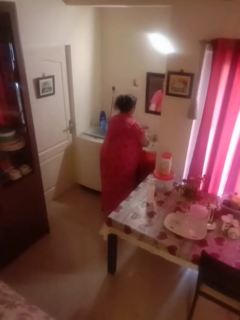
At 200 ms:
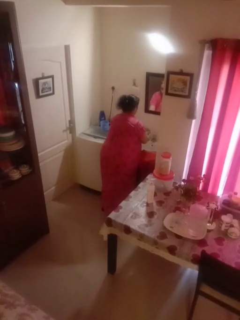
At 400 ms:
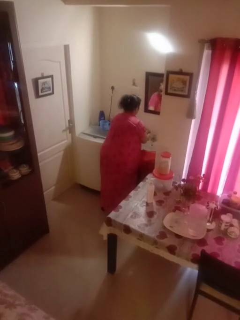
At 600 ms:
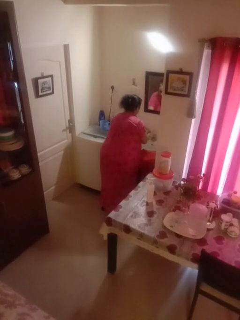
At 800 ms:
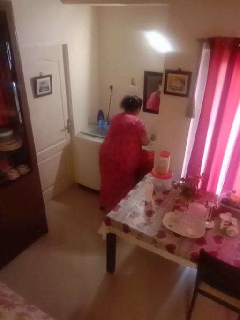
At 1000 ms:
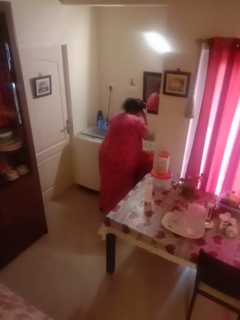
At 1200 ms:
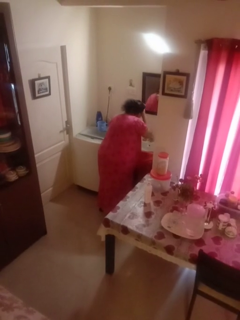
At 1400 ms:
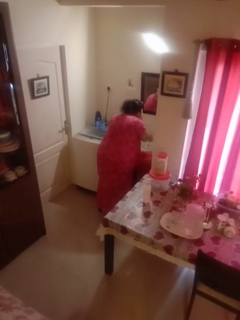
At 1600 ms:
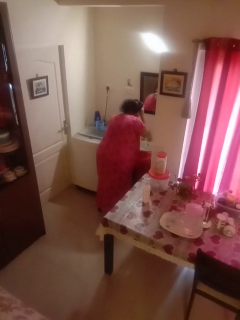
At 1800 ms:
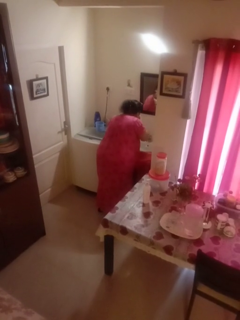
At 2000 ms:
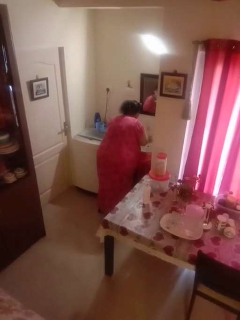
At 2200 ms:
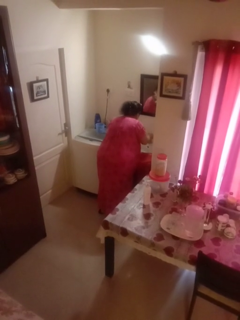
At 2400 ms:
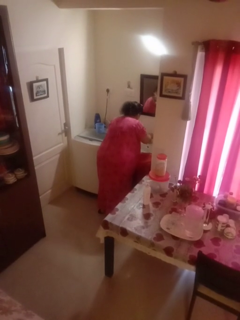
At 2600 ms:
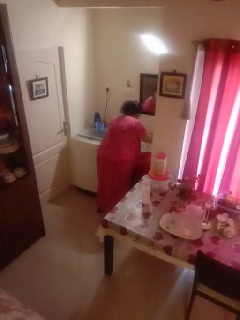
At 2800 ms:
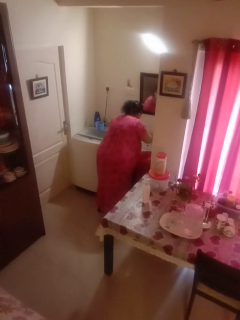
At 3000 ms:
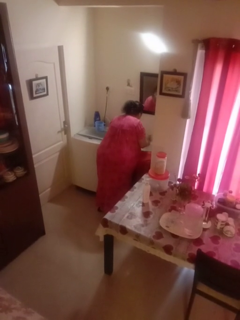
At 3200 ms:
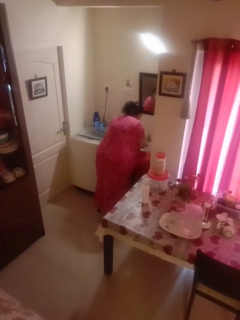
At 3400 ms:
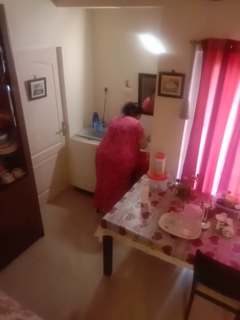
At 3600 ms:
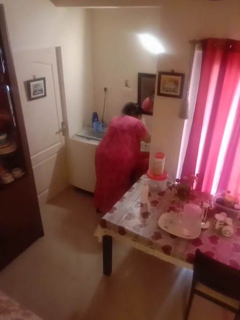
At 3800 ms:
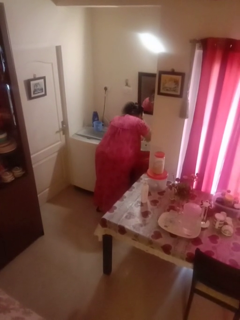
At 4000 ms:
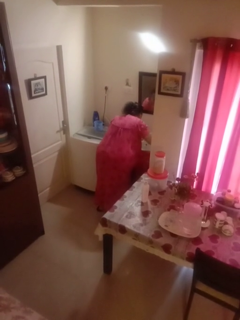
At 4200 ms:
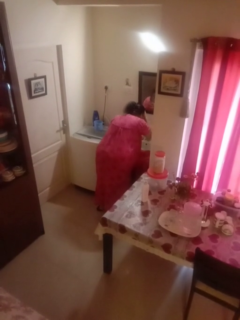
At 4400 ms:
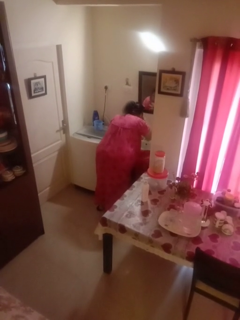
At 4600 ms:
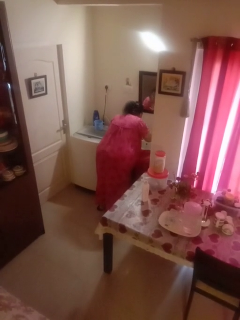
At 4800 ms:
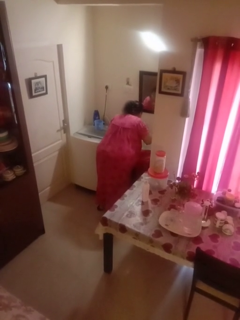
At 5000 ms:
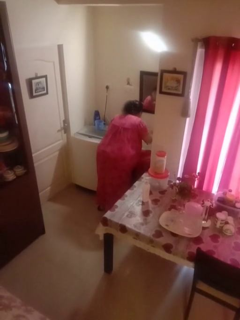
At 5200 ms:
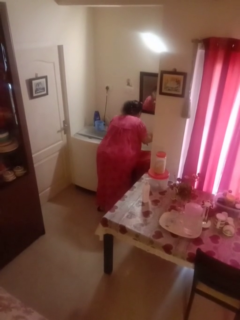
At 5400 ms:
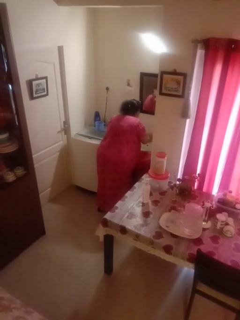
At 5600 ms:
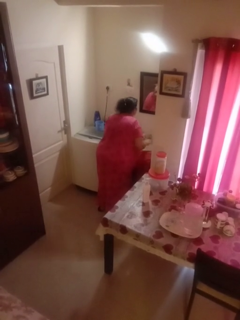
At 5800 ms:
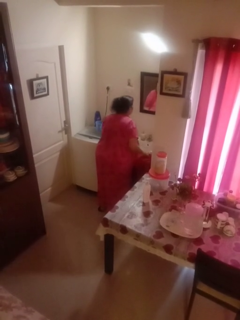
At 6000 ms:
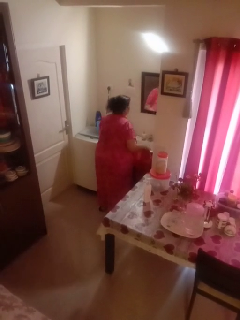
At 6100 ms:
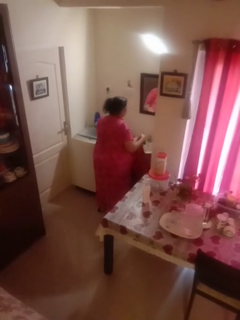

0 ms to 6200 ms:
person washes face

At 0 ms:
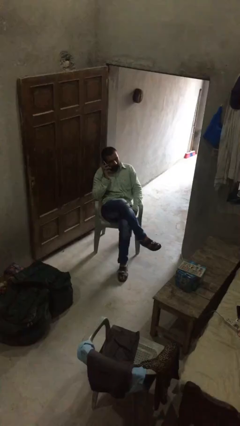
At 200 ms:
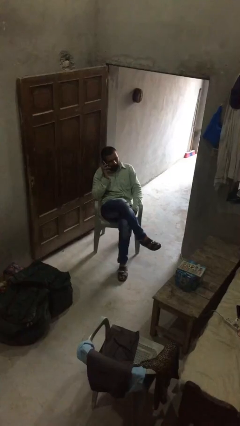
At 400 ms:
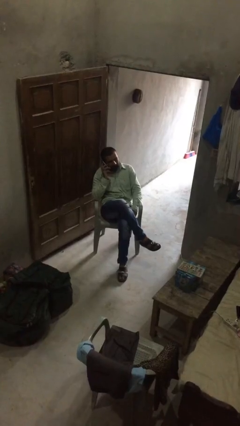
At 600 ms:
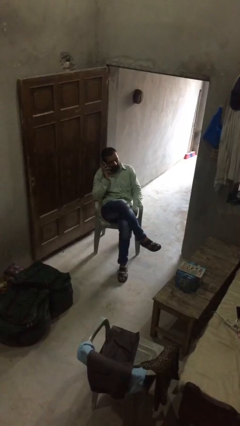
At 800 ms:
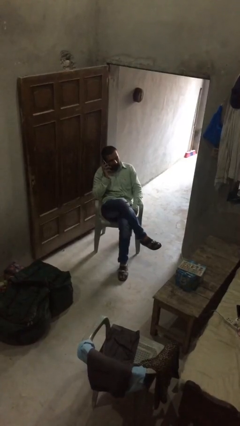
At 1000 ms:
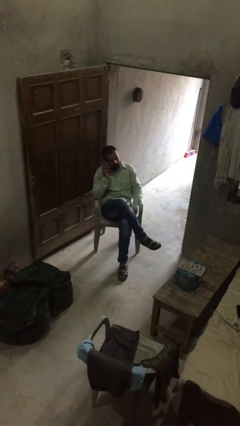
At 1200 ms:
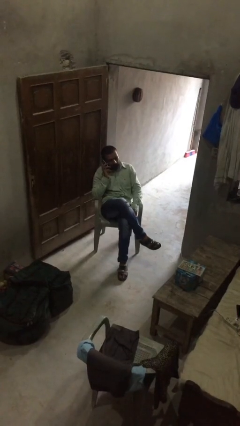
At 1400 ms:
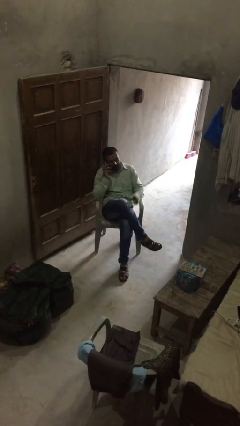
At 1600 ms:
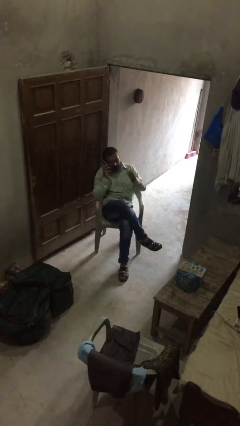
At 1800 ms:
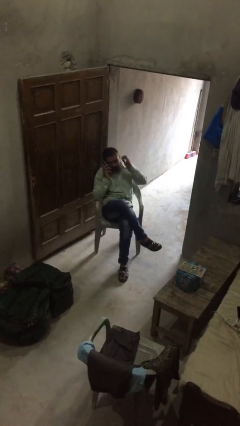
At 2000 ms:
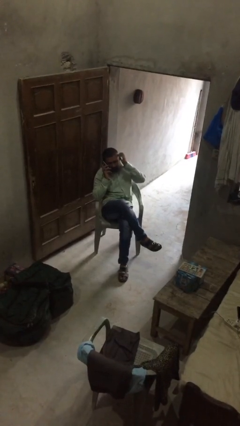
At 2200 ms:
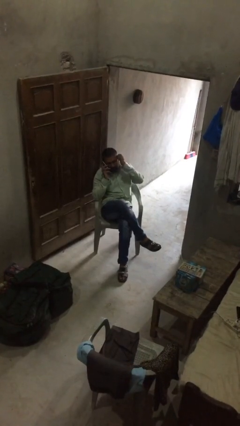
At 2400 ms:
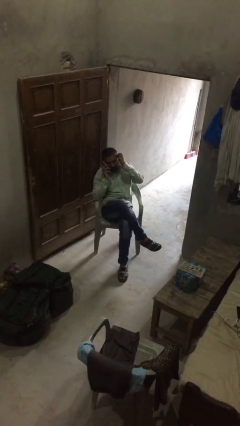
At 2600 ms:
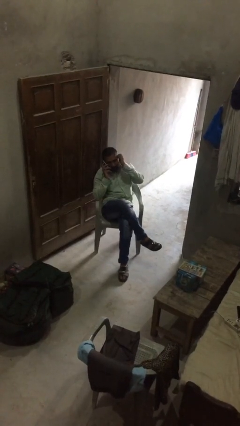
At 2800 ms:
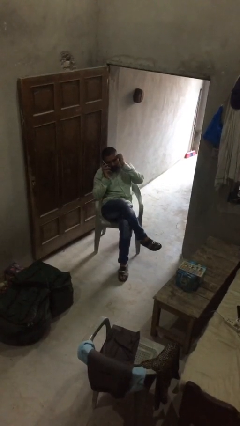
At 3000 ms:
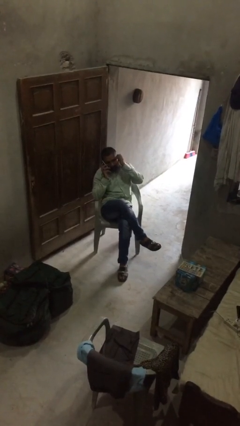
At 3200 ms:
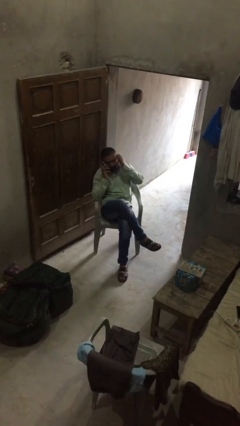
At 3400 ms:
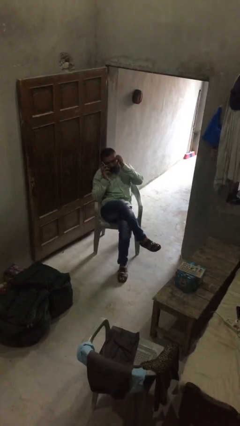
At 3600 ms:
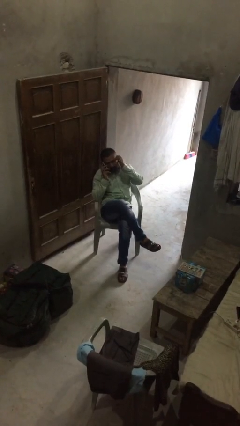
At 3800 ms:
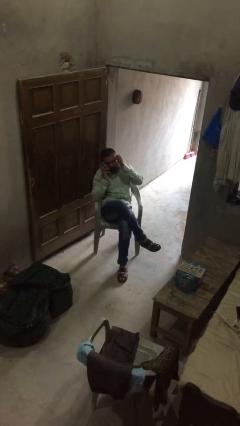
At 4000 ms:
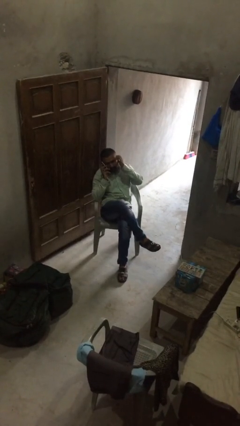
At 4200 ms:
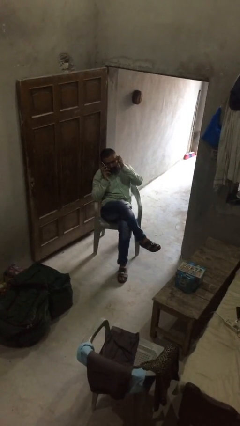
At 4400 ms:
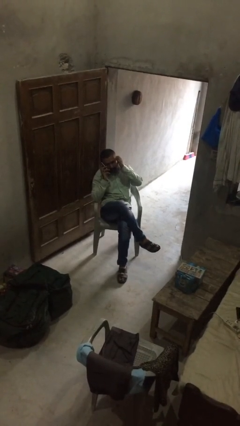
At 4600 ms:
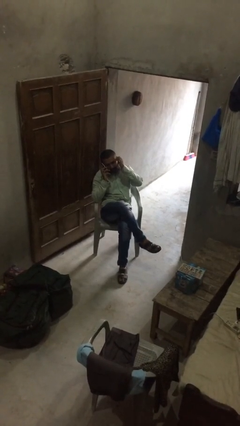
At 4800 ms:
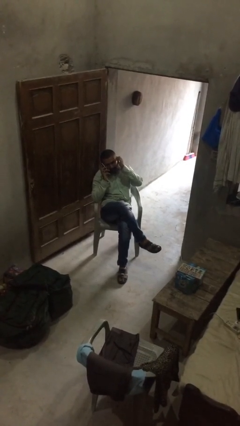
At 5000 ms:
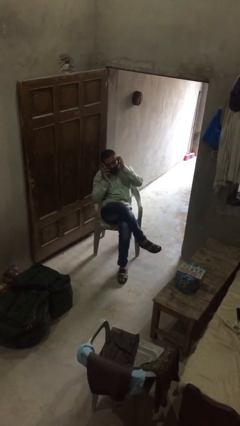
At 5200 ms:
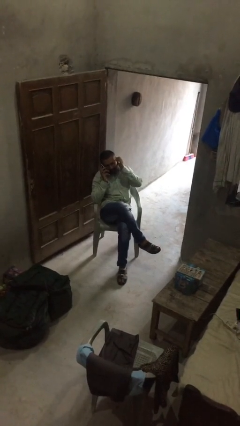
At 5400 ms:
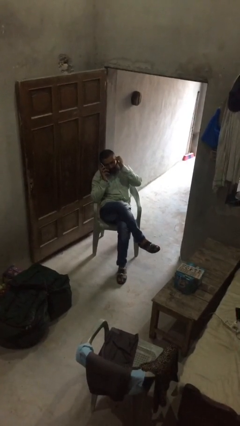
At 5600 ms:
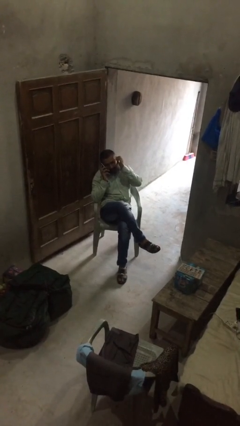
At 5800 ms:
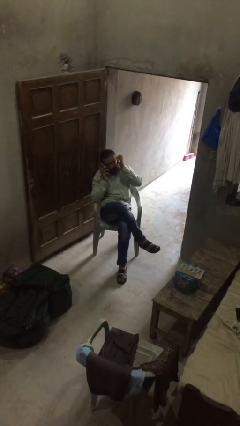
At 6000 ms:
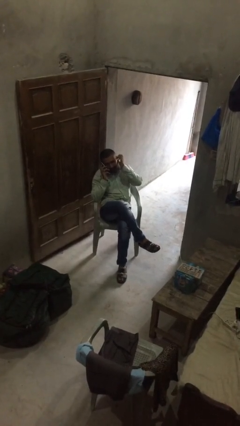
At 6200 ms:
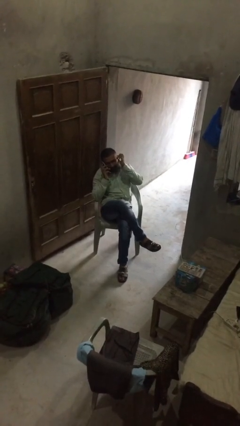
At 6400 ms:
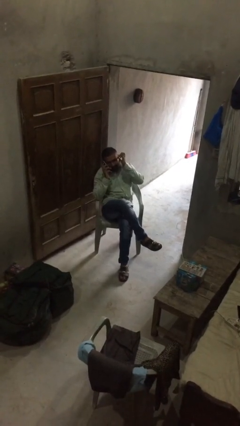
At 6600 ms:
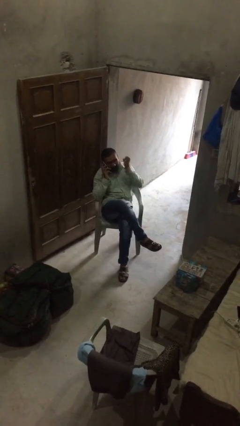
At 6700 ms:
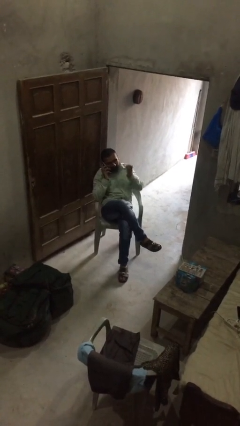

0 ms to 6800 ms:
person talks on phone

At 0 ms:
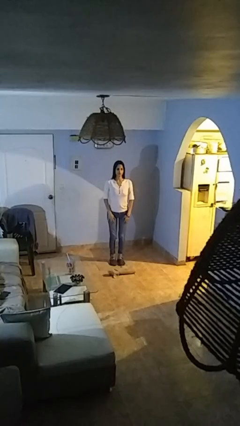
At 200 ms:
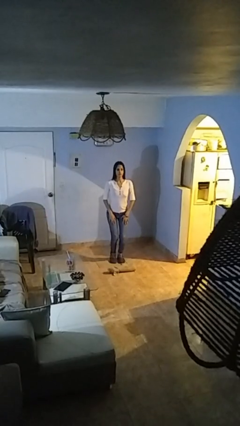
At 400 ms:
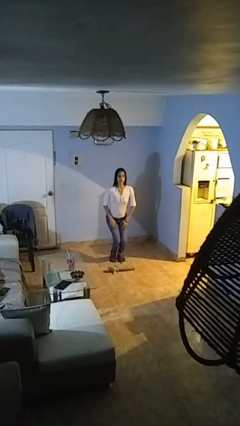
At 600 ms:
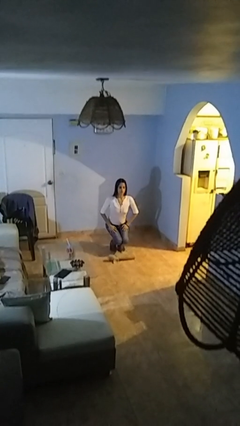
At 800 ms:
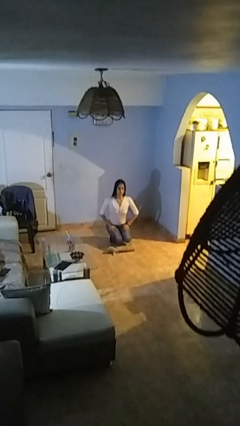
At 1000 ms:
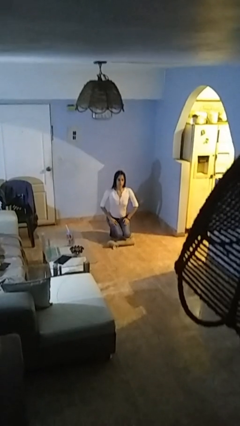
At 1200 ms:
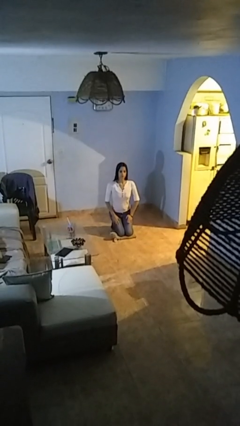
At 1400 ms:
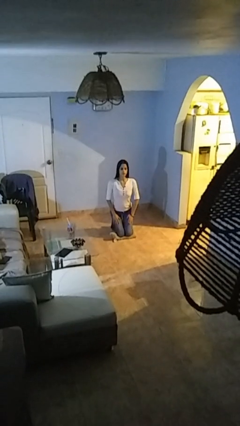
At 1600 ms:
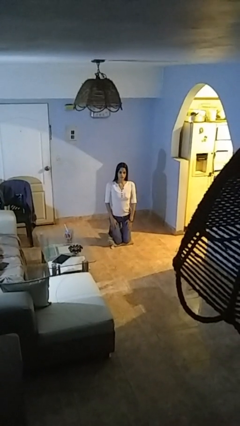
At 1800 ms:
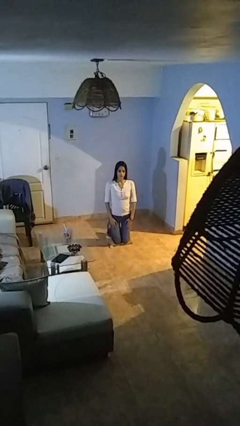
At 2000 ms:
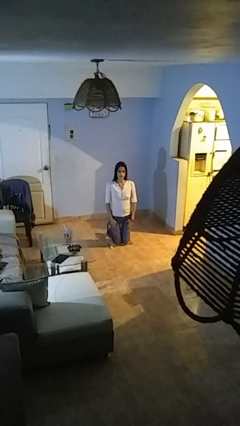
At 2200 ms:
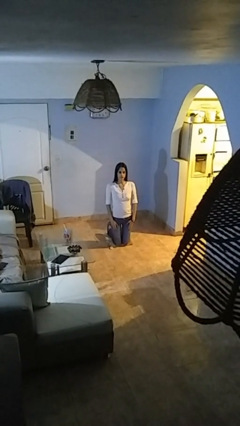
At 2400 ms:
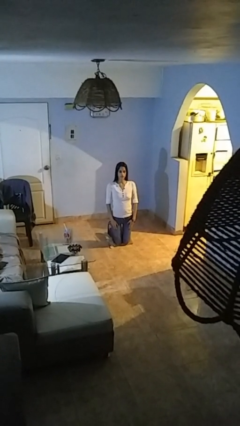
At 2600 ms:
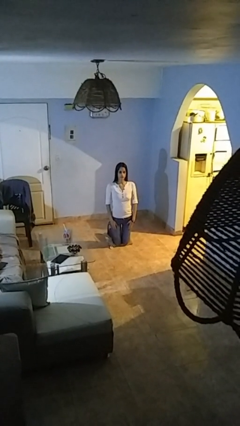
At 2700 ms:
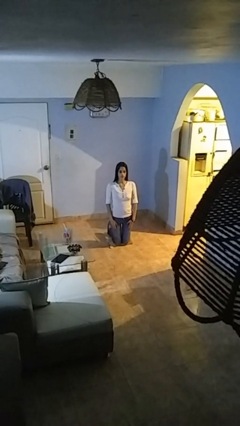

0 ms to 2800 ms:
person kneels

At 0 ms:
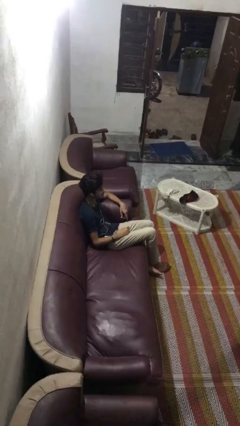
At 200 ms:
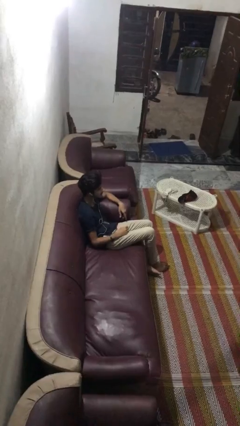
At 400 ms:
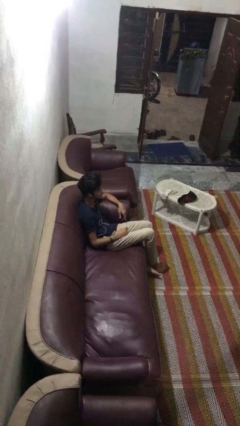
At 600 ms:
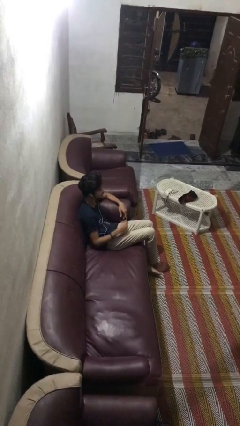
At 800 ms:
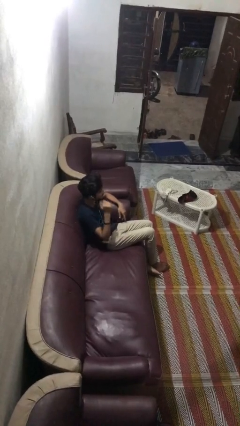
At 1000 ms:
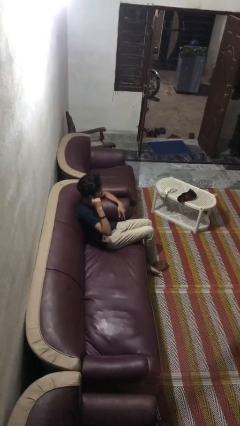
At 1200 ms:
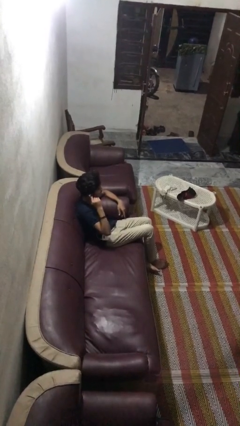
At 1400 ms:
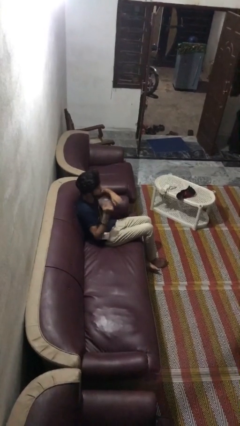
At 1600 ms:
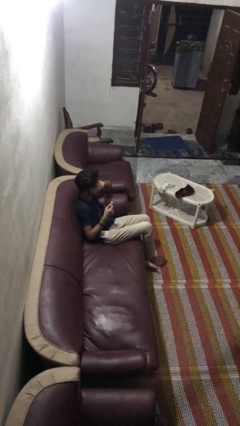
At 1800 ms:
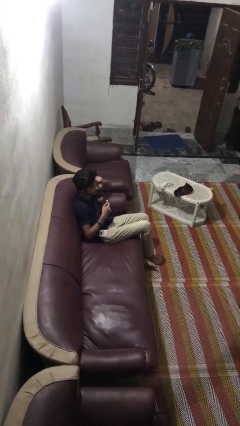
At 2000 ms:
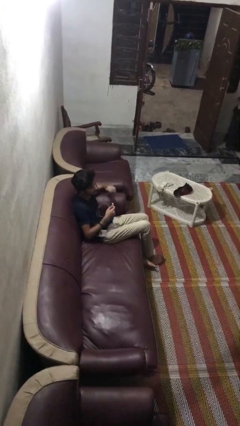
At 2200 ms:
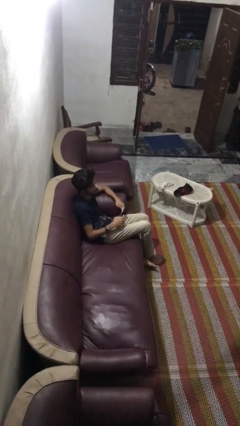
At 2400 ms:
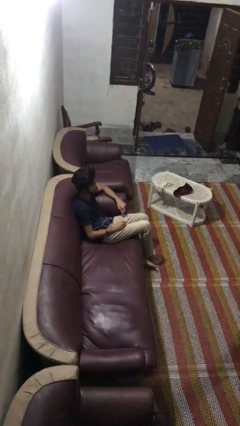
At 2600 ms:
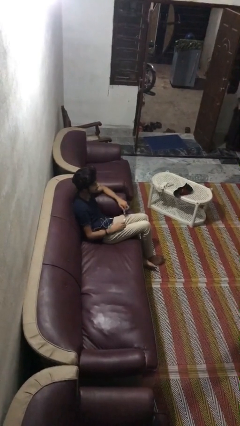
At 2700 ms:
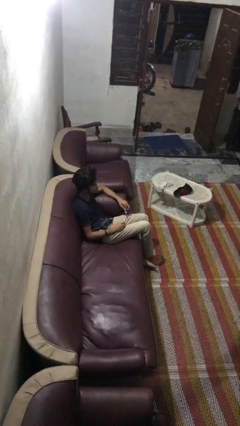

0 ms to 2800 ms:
person takes off headphones

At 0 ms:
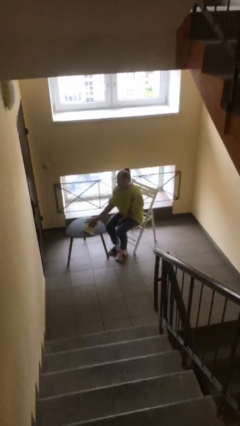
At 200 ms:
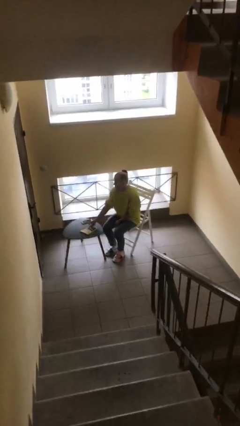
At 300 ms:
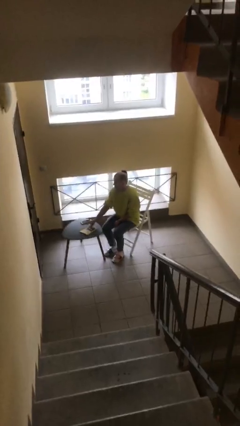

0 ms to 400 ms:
person puts down object on table
